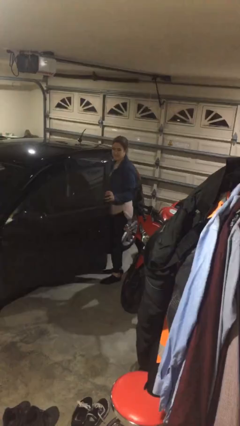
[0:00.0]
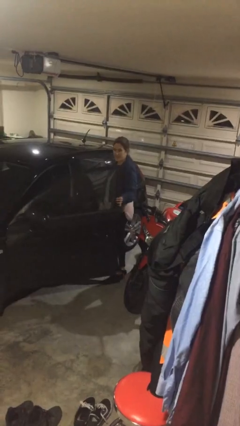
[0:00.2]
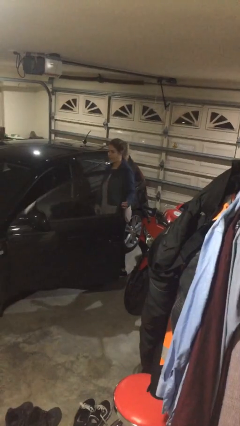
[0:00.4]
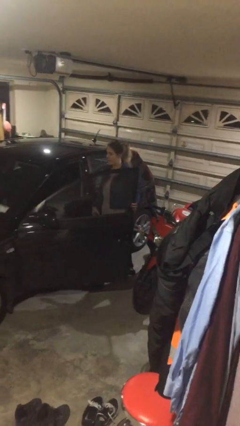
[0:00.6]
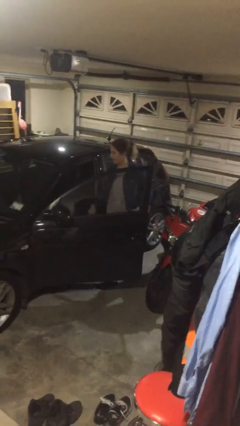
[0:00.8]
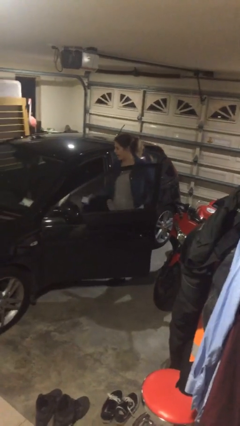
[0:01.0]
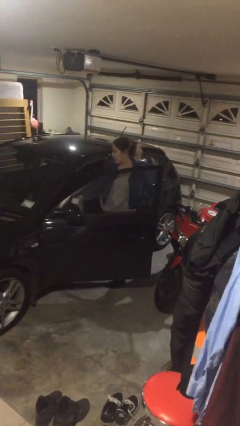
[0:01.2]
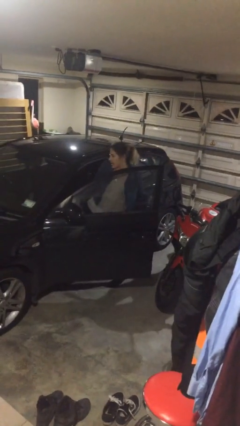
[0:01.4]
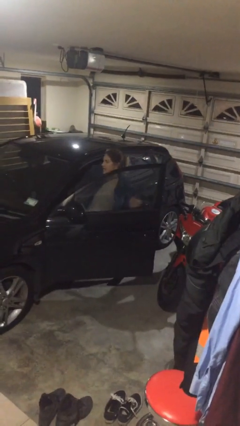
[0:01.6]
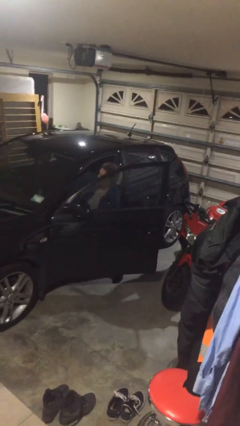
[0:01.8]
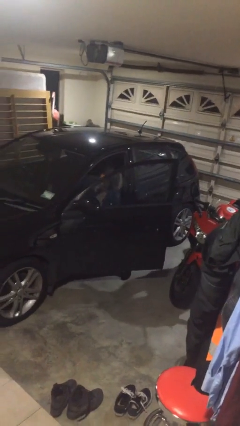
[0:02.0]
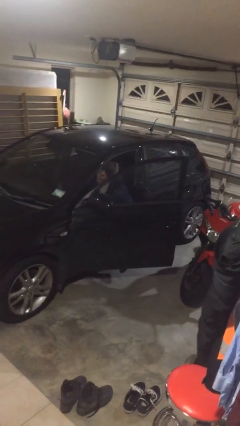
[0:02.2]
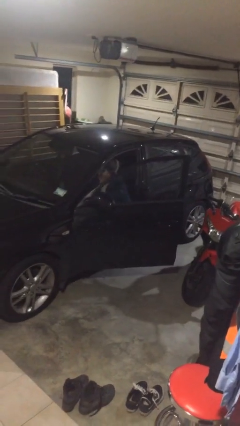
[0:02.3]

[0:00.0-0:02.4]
person enters car

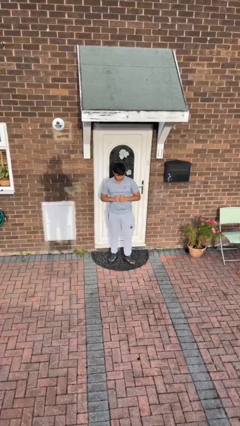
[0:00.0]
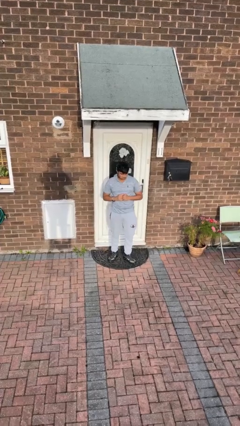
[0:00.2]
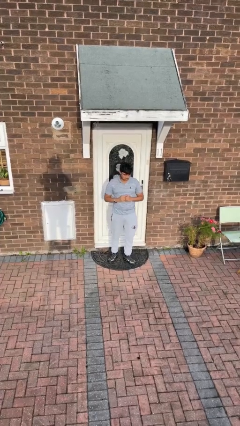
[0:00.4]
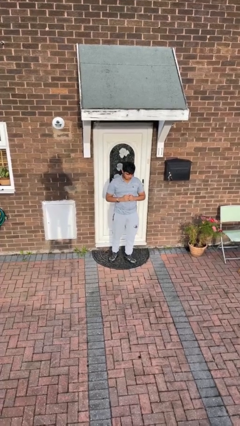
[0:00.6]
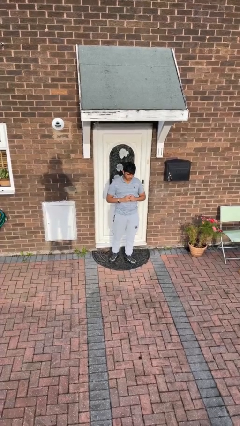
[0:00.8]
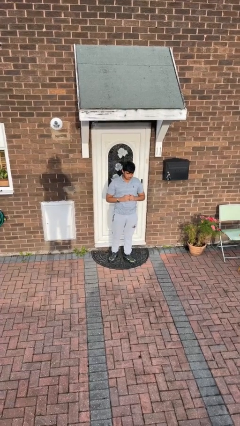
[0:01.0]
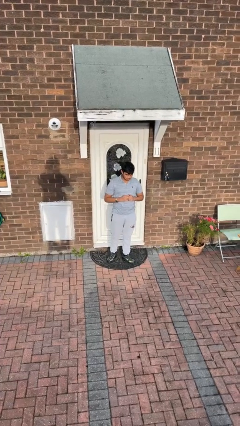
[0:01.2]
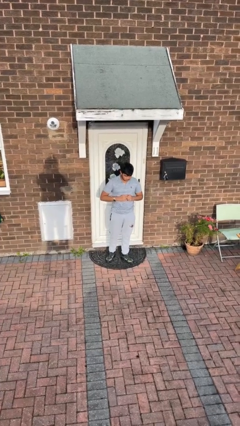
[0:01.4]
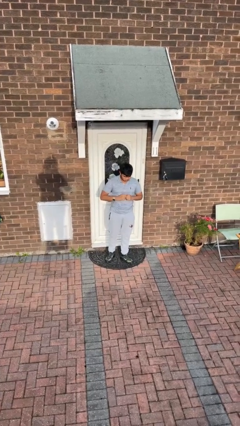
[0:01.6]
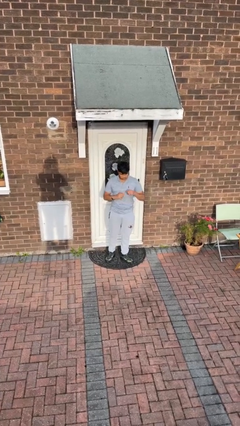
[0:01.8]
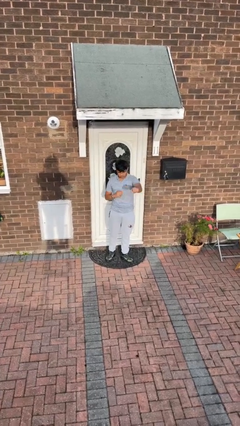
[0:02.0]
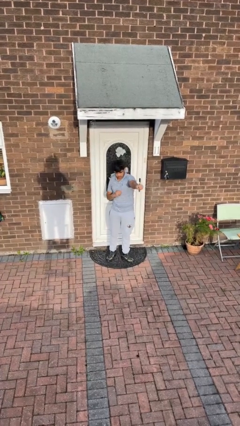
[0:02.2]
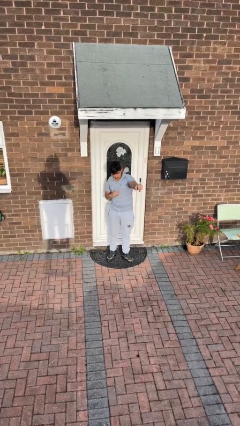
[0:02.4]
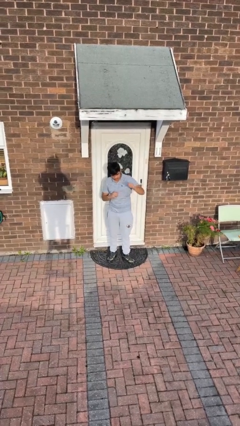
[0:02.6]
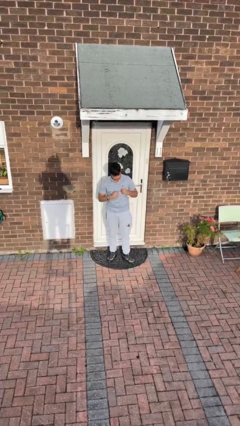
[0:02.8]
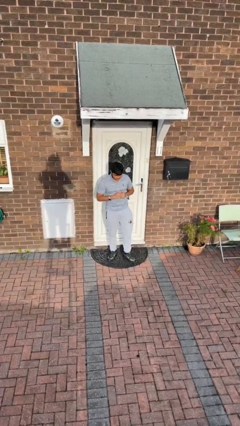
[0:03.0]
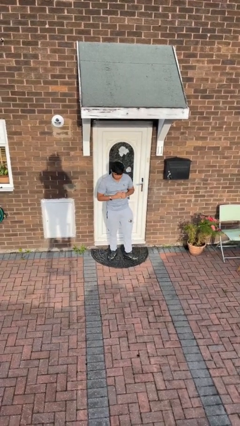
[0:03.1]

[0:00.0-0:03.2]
person punches

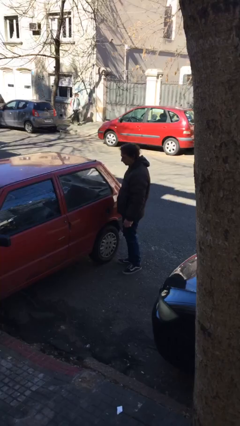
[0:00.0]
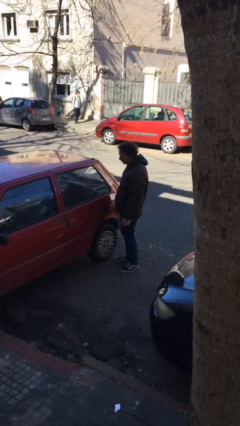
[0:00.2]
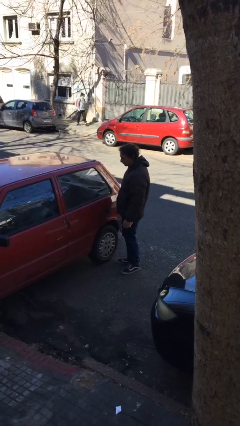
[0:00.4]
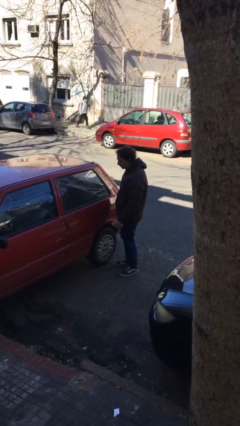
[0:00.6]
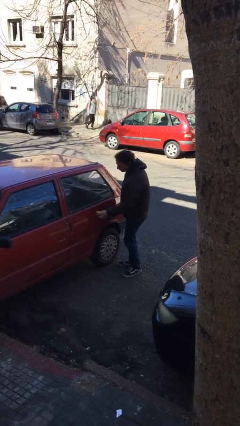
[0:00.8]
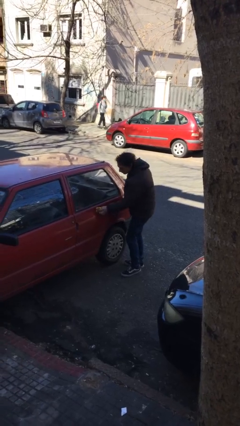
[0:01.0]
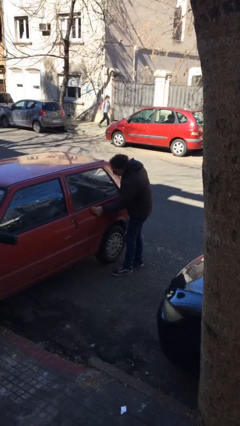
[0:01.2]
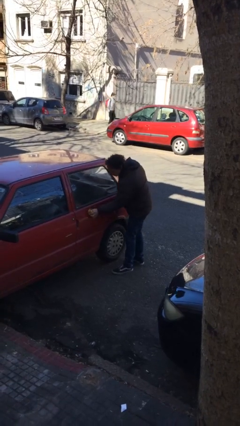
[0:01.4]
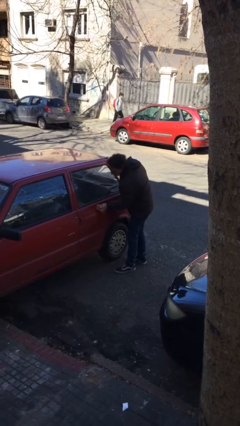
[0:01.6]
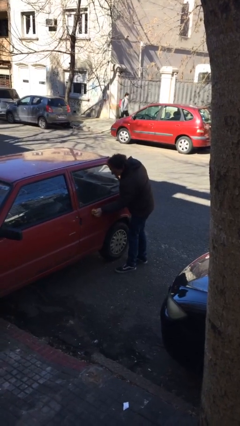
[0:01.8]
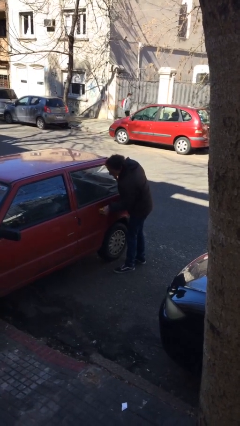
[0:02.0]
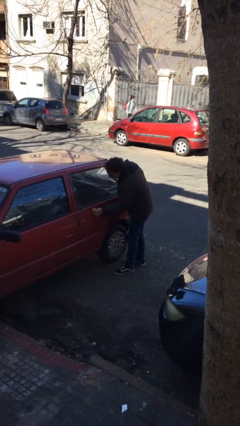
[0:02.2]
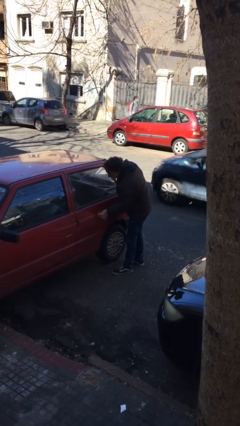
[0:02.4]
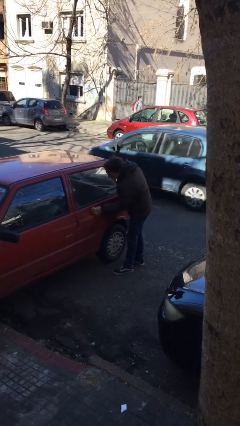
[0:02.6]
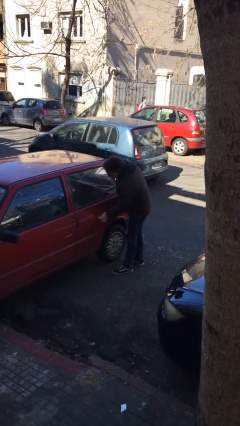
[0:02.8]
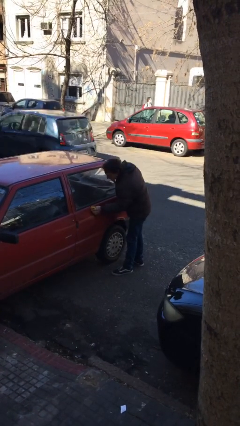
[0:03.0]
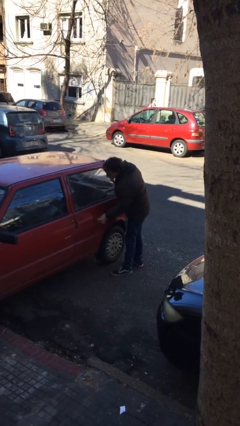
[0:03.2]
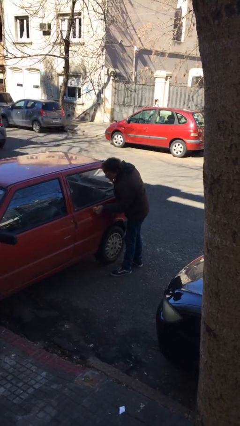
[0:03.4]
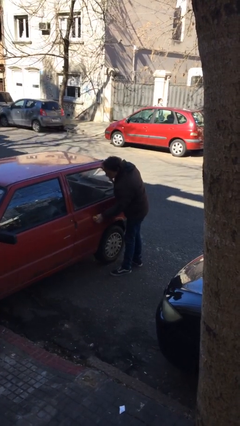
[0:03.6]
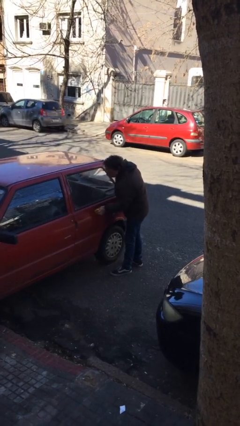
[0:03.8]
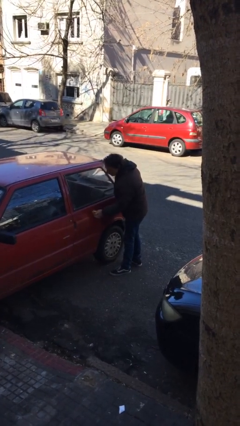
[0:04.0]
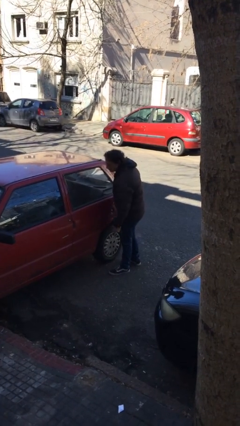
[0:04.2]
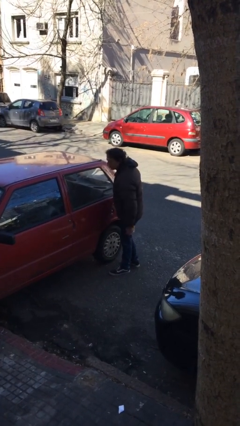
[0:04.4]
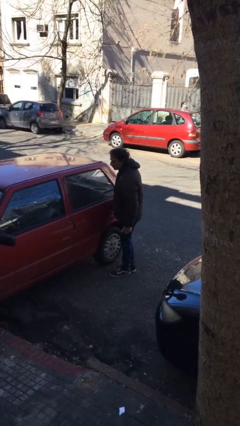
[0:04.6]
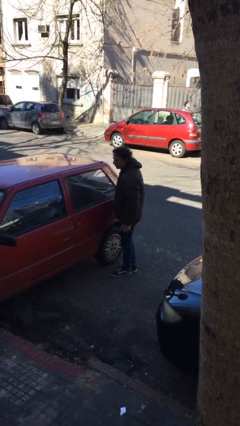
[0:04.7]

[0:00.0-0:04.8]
person polishes car with rag

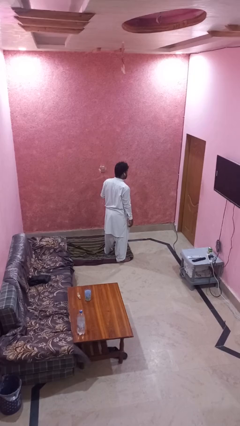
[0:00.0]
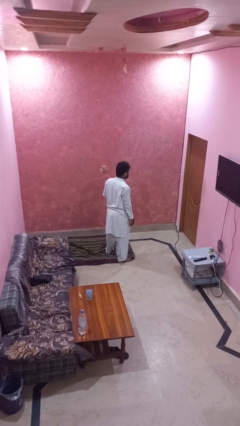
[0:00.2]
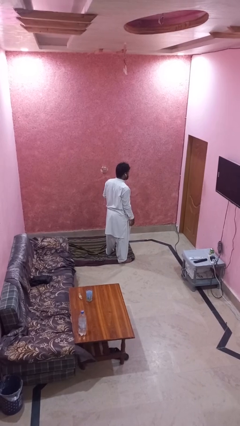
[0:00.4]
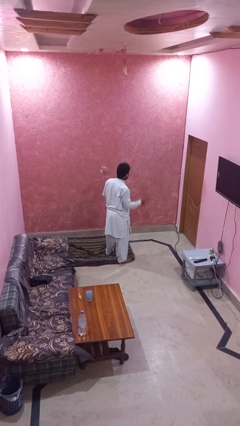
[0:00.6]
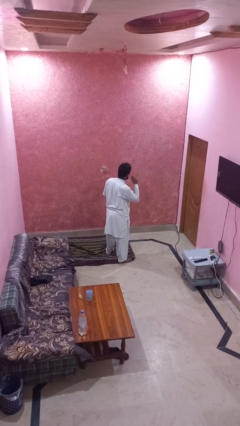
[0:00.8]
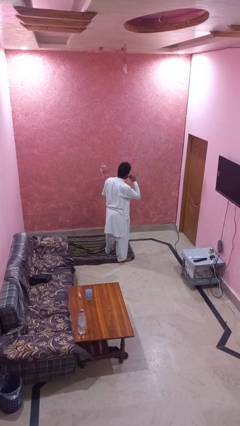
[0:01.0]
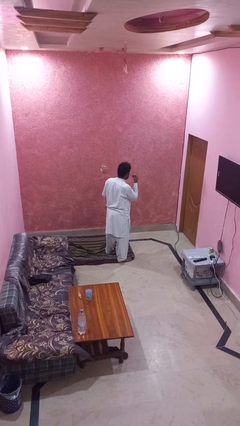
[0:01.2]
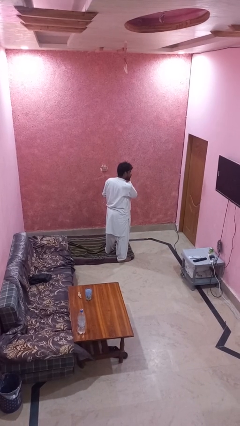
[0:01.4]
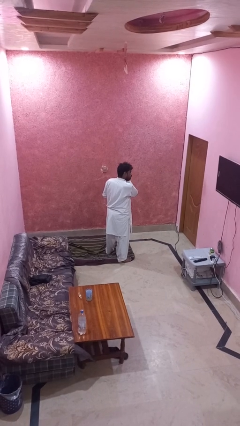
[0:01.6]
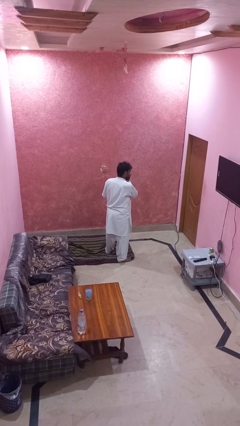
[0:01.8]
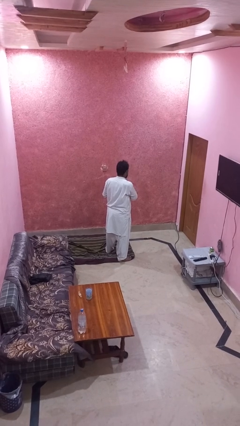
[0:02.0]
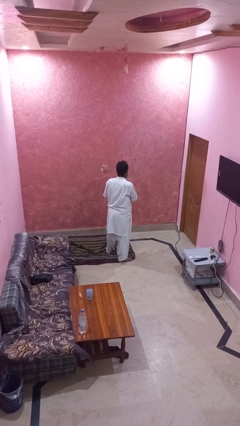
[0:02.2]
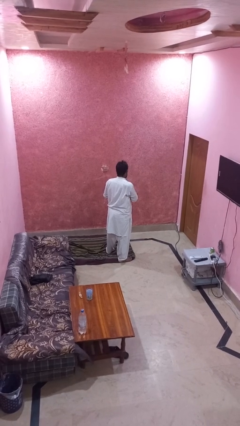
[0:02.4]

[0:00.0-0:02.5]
person takes off headphones

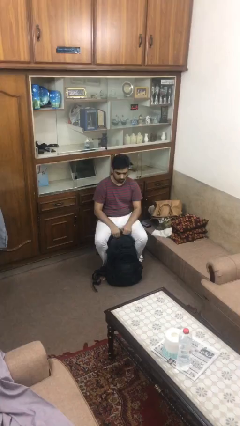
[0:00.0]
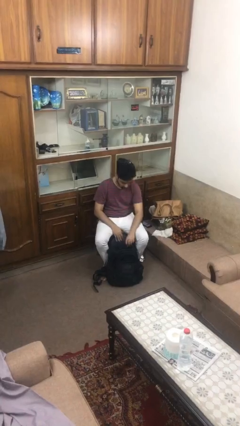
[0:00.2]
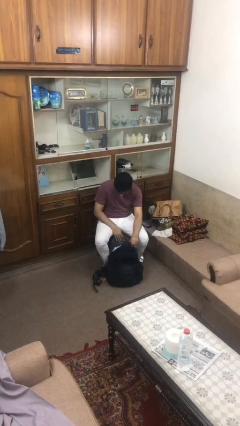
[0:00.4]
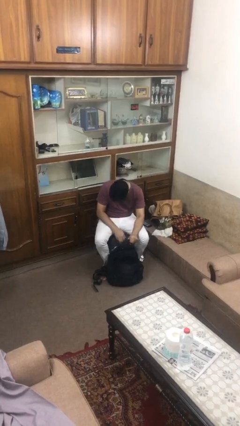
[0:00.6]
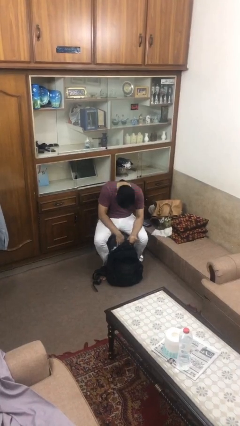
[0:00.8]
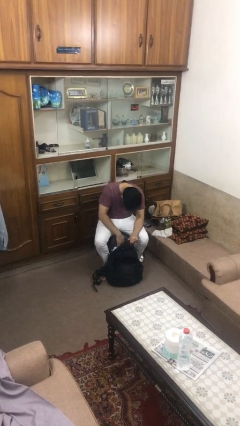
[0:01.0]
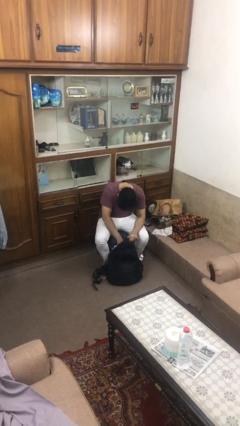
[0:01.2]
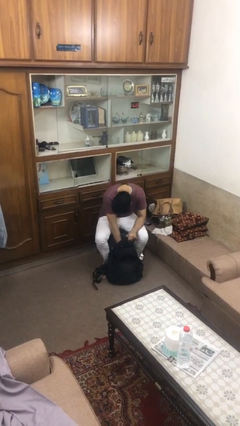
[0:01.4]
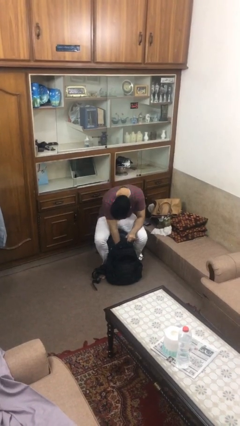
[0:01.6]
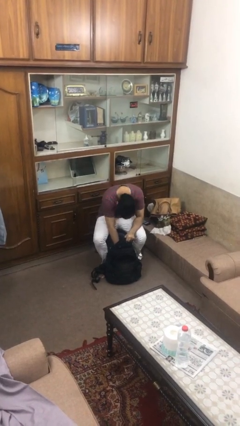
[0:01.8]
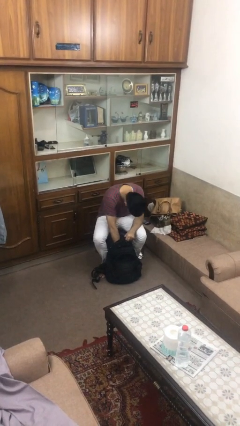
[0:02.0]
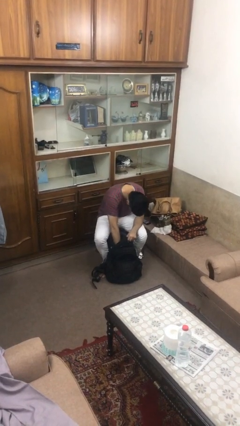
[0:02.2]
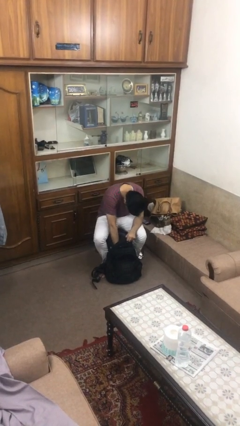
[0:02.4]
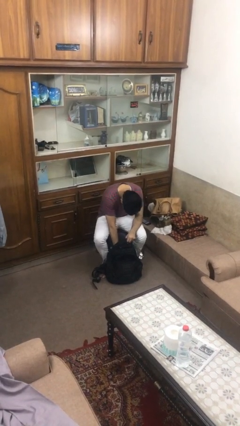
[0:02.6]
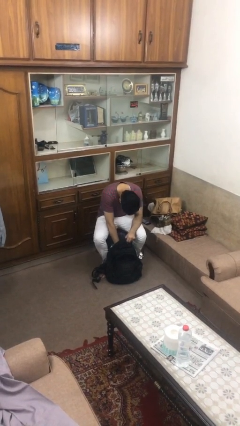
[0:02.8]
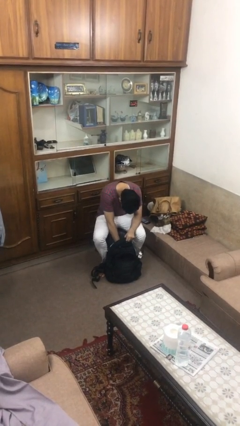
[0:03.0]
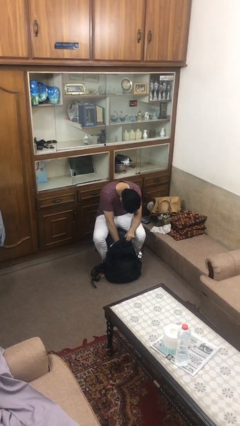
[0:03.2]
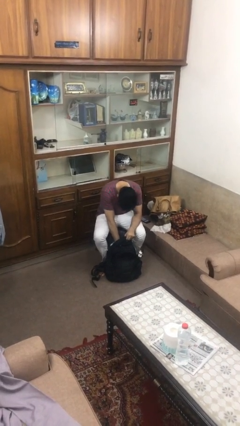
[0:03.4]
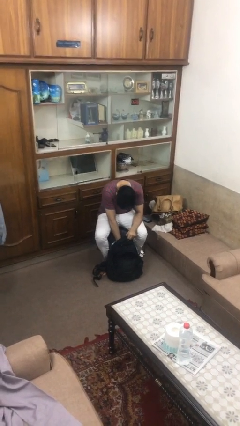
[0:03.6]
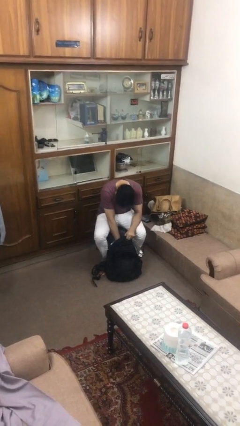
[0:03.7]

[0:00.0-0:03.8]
person searches in backpack

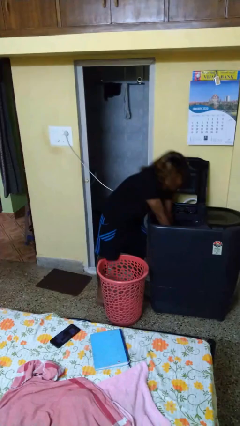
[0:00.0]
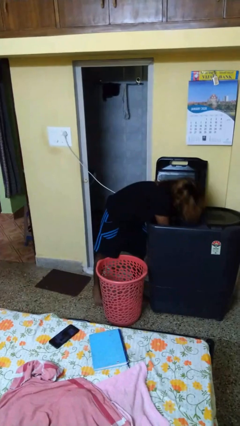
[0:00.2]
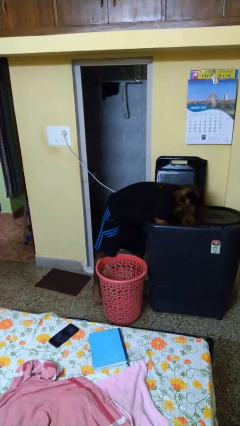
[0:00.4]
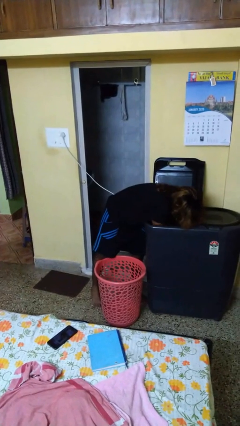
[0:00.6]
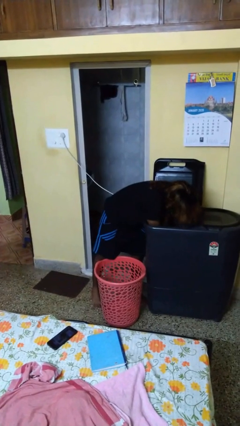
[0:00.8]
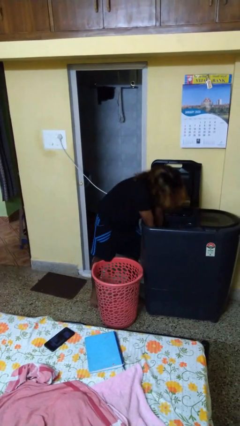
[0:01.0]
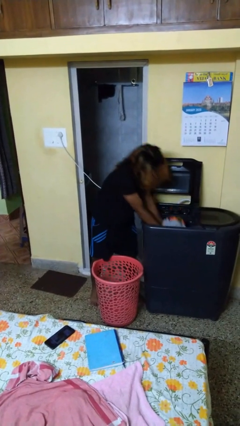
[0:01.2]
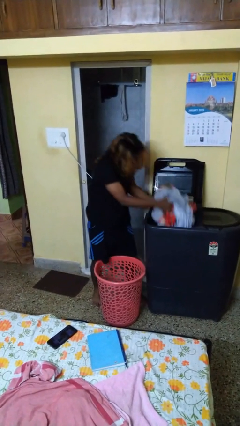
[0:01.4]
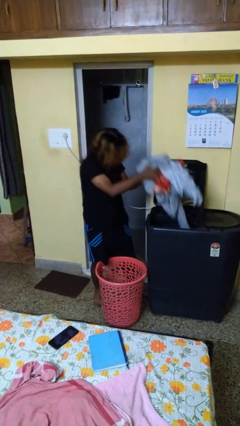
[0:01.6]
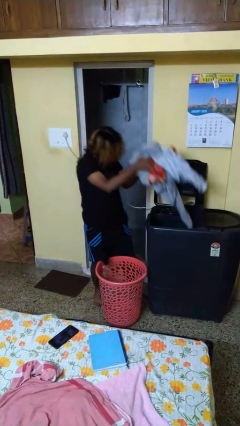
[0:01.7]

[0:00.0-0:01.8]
person unloads clotheswasher
